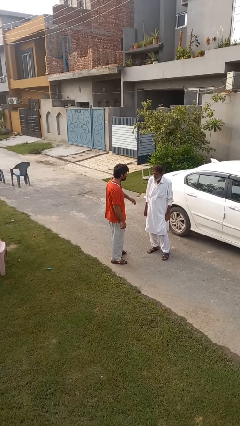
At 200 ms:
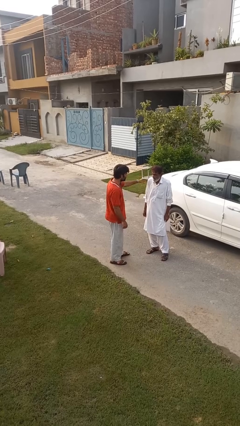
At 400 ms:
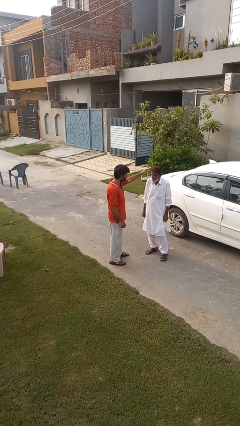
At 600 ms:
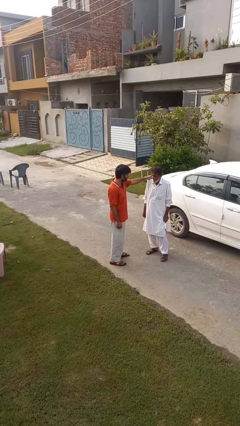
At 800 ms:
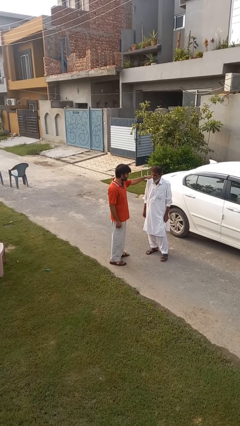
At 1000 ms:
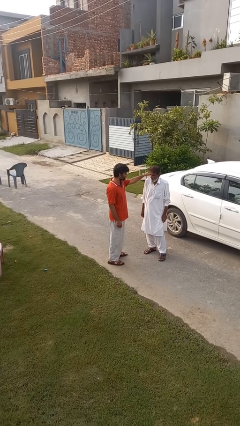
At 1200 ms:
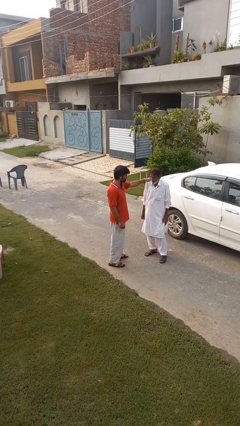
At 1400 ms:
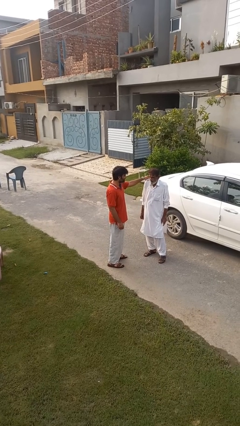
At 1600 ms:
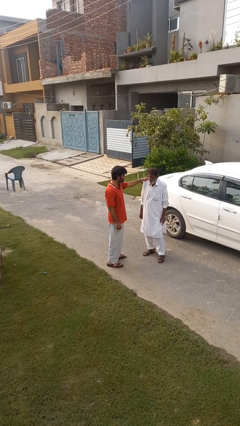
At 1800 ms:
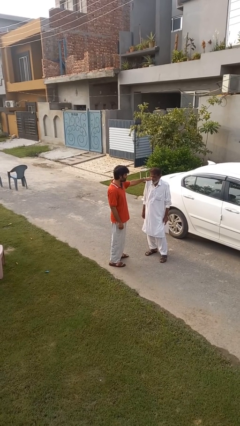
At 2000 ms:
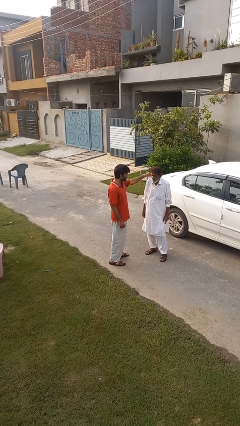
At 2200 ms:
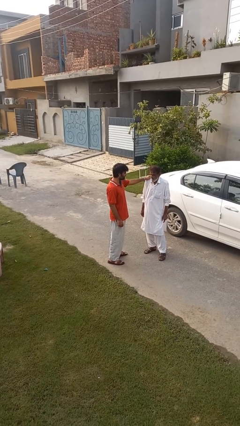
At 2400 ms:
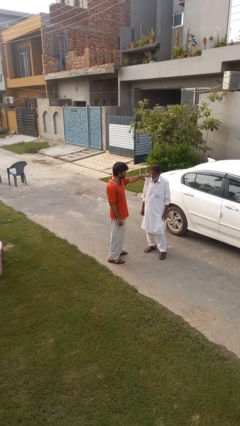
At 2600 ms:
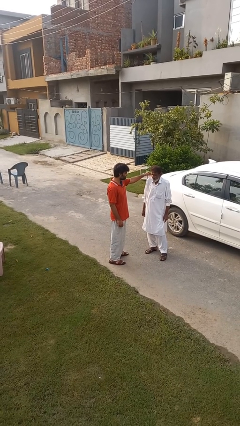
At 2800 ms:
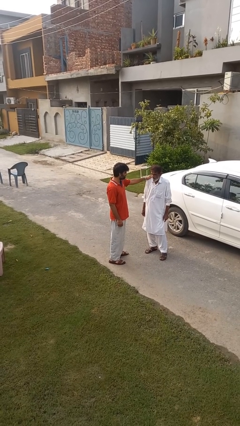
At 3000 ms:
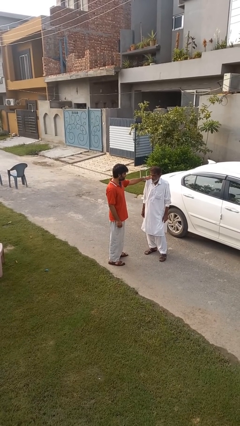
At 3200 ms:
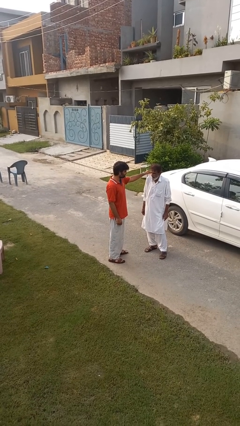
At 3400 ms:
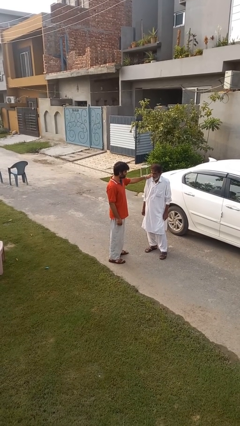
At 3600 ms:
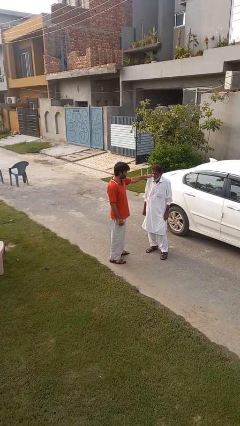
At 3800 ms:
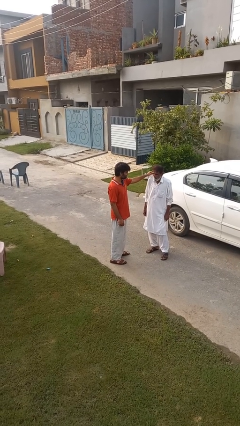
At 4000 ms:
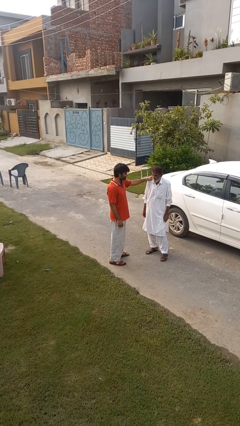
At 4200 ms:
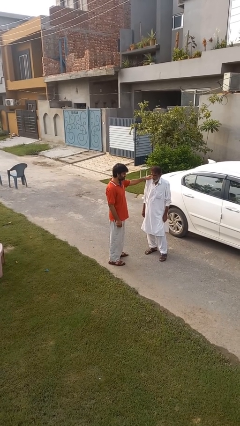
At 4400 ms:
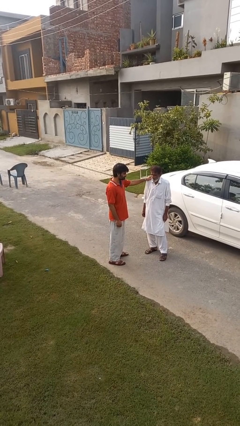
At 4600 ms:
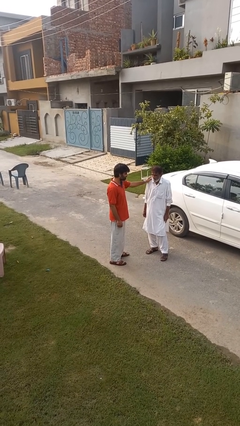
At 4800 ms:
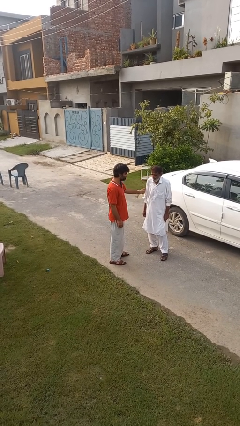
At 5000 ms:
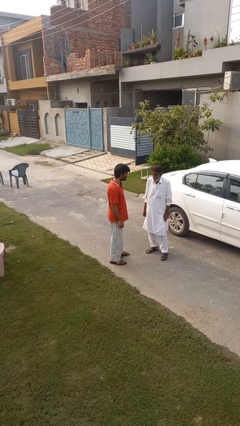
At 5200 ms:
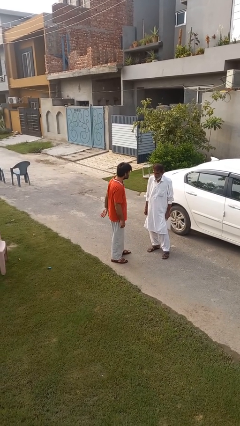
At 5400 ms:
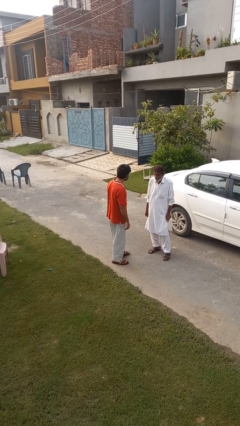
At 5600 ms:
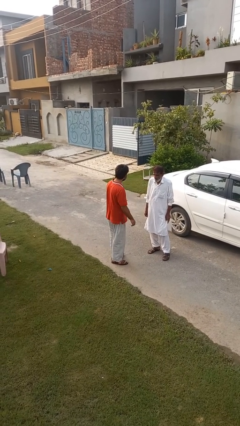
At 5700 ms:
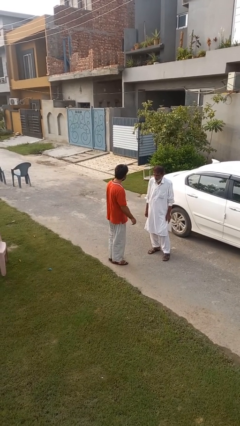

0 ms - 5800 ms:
person pounds shoulders of person

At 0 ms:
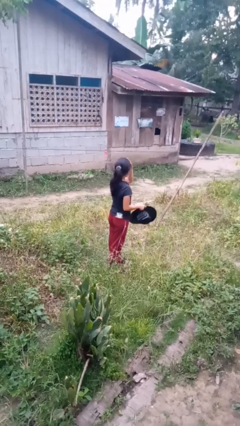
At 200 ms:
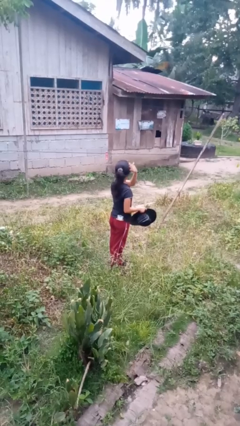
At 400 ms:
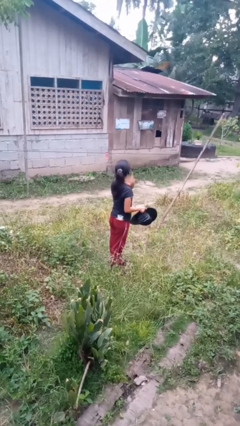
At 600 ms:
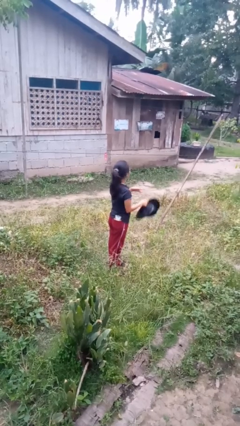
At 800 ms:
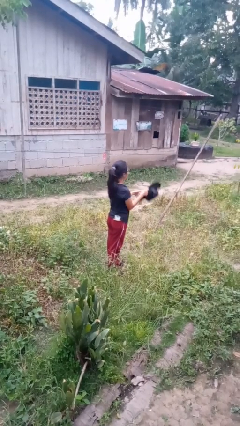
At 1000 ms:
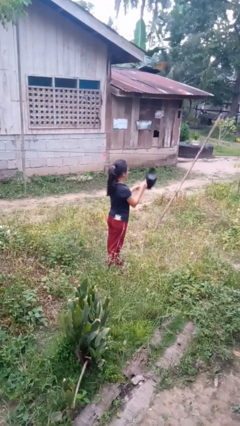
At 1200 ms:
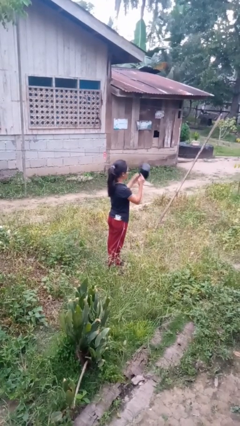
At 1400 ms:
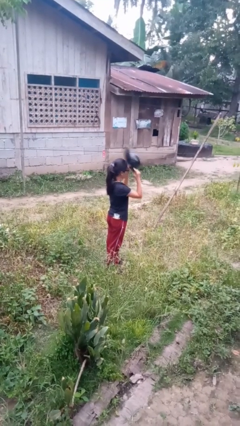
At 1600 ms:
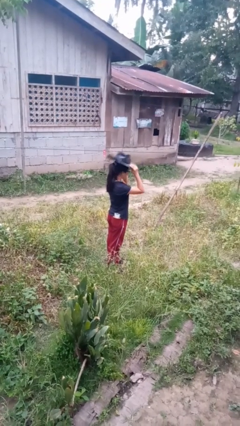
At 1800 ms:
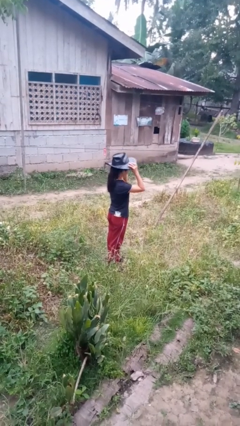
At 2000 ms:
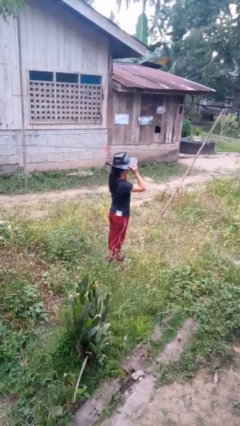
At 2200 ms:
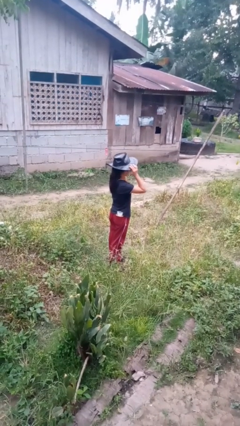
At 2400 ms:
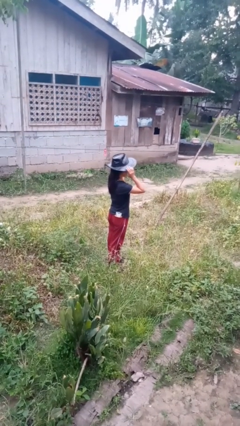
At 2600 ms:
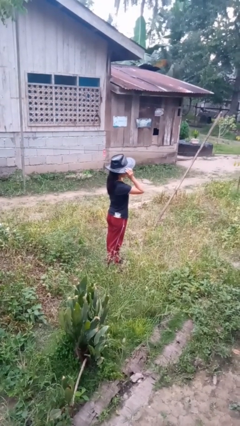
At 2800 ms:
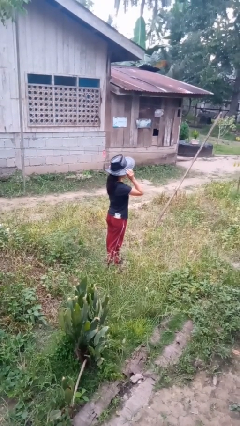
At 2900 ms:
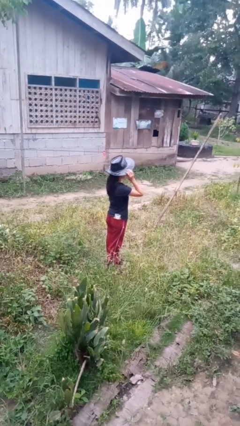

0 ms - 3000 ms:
person puts on hat

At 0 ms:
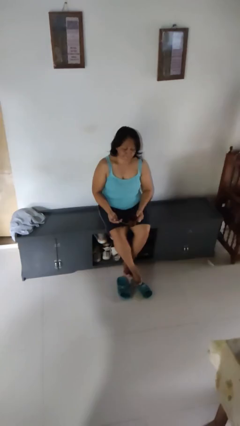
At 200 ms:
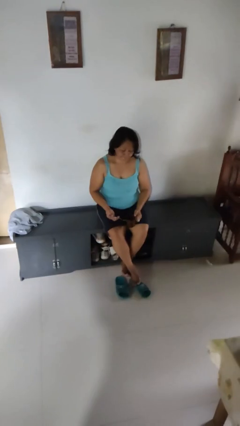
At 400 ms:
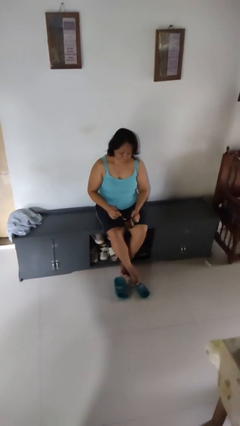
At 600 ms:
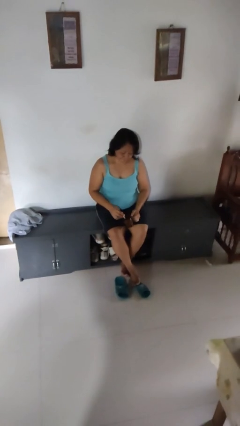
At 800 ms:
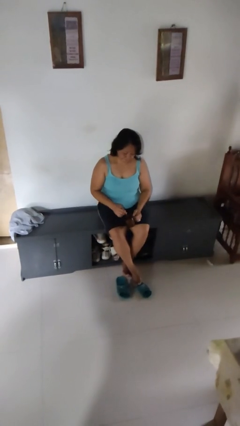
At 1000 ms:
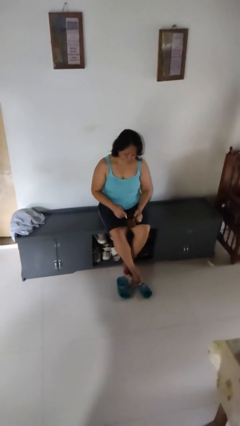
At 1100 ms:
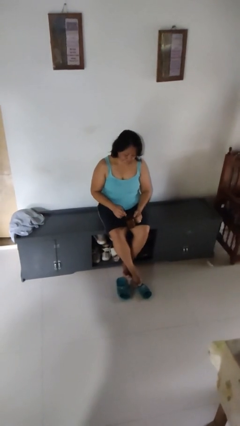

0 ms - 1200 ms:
person stirs mug

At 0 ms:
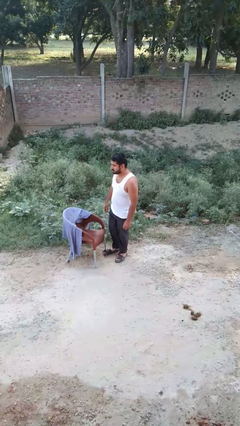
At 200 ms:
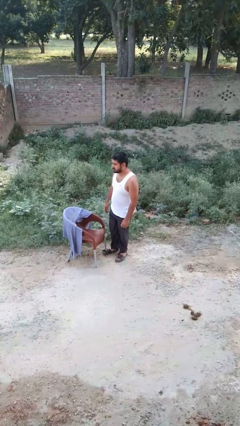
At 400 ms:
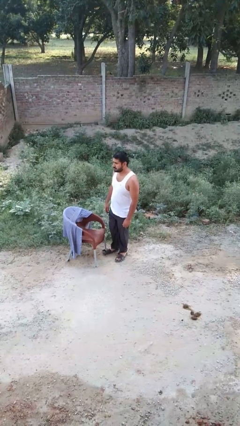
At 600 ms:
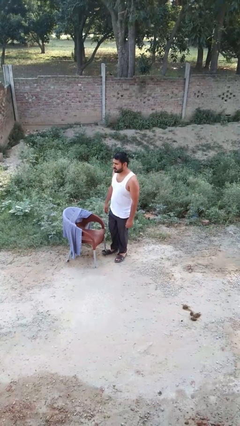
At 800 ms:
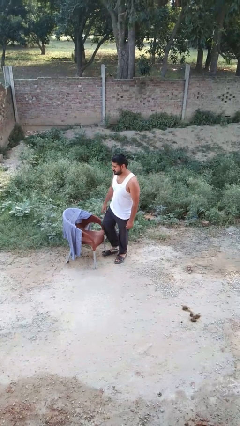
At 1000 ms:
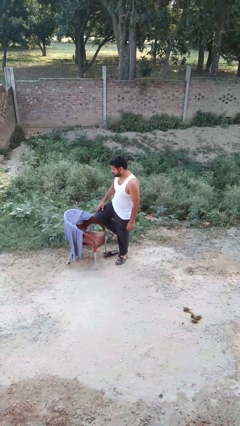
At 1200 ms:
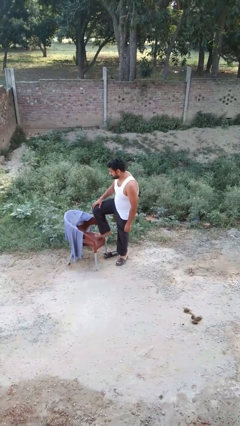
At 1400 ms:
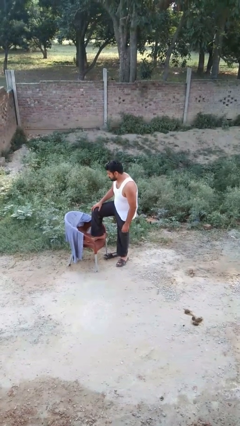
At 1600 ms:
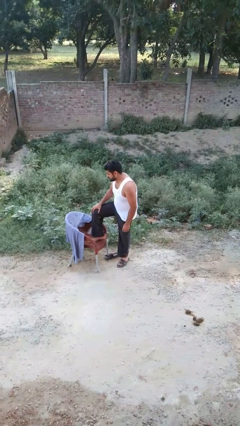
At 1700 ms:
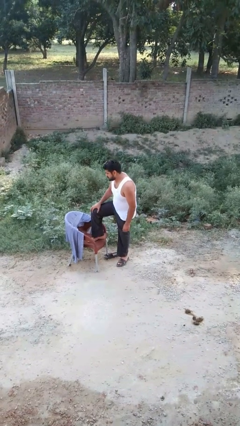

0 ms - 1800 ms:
person puts feet up

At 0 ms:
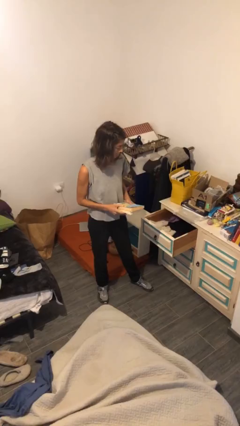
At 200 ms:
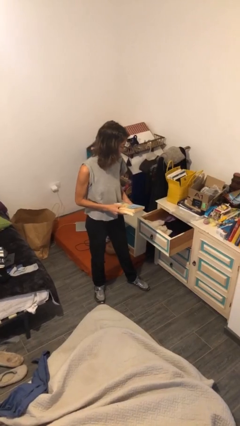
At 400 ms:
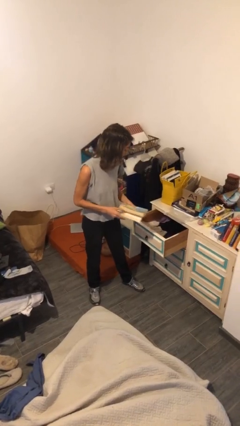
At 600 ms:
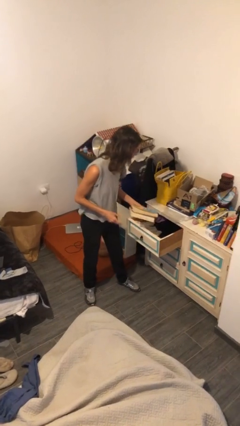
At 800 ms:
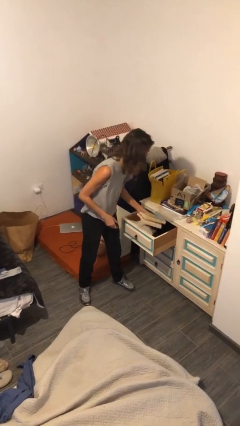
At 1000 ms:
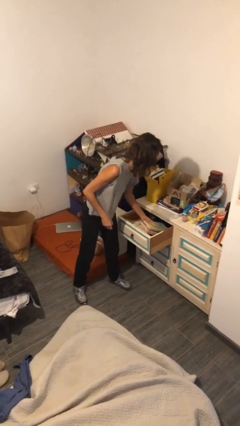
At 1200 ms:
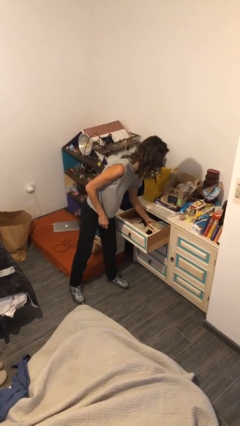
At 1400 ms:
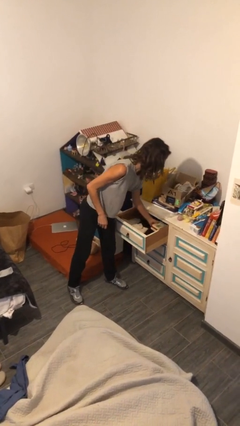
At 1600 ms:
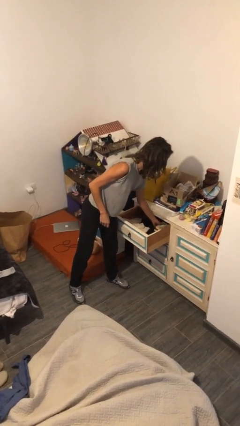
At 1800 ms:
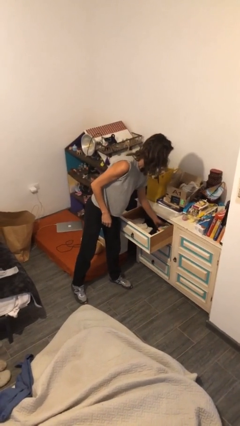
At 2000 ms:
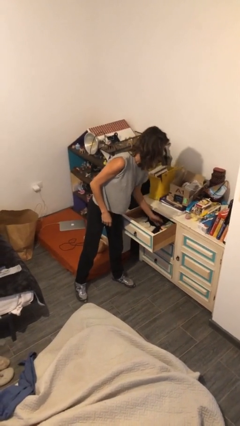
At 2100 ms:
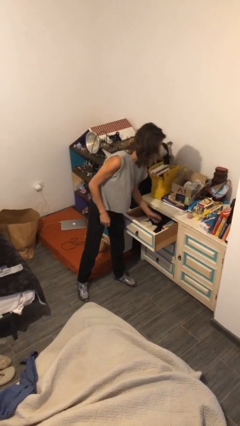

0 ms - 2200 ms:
person puts down object into cabinet

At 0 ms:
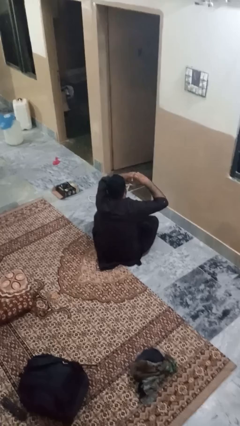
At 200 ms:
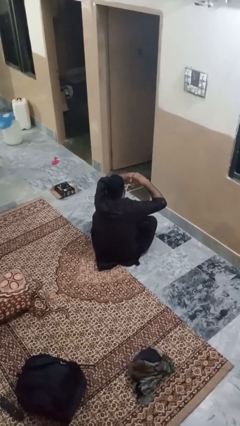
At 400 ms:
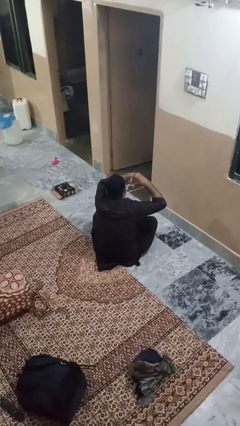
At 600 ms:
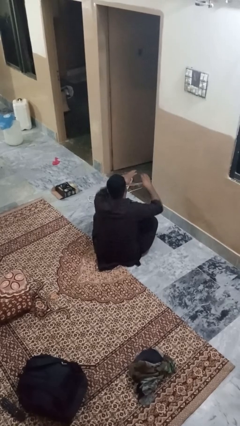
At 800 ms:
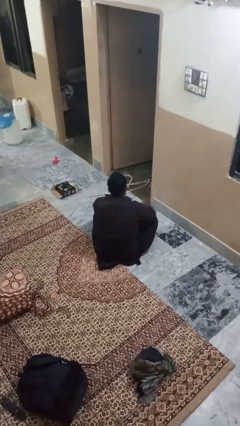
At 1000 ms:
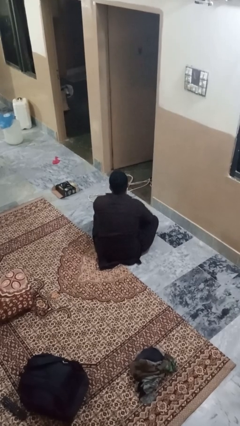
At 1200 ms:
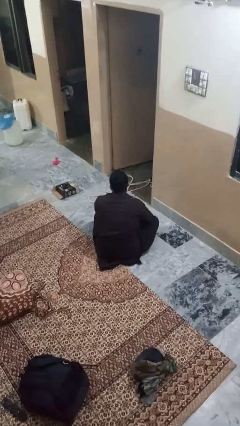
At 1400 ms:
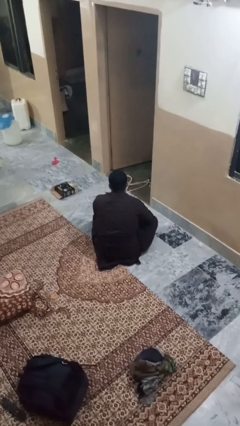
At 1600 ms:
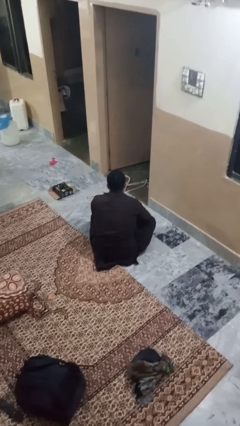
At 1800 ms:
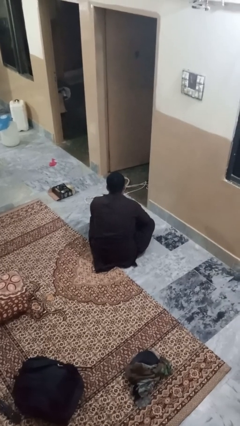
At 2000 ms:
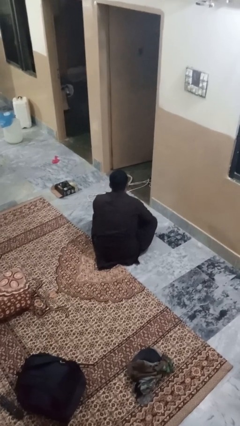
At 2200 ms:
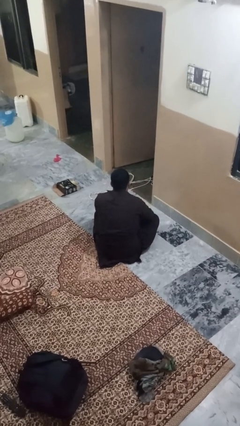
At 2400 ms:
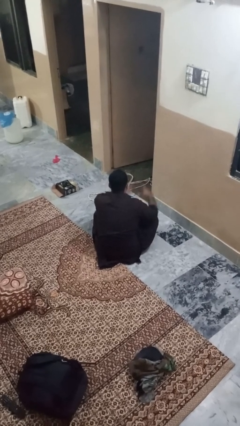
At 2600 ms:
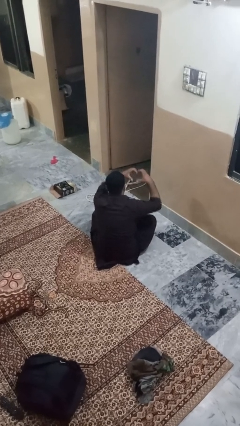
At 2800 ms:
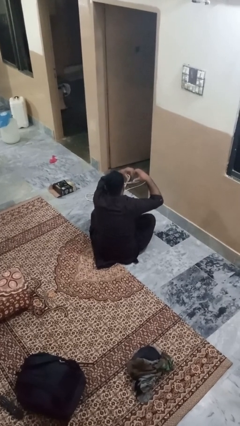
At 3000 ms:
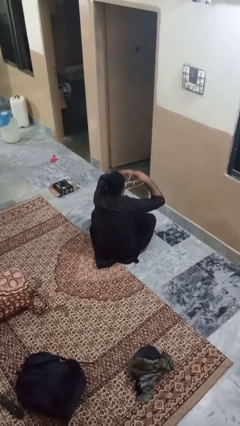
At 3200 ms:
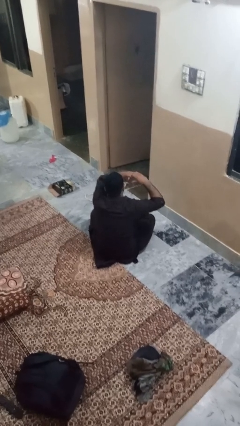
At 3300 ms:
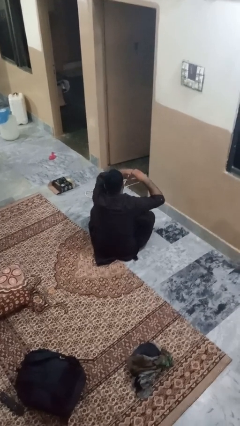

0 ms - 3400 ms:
person gestures heart

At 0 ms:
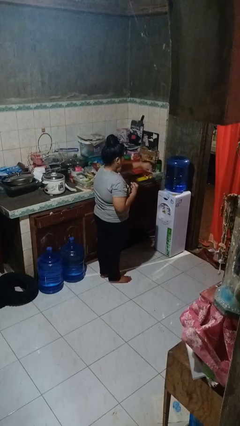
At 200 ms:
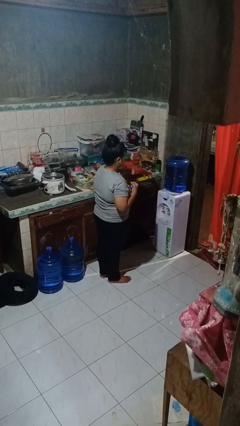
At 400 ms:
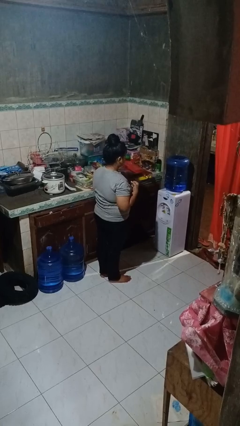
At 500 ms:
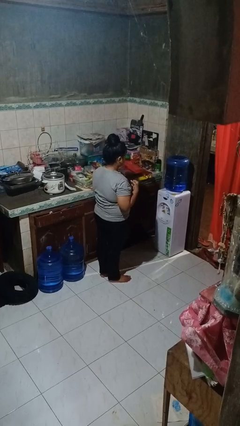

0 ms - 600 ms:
person punches
